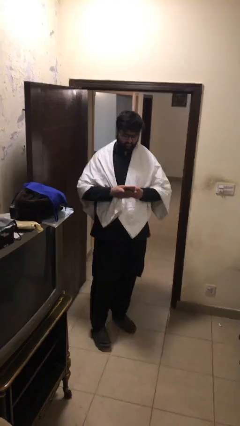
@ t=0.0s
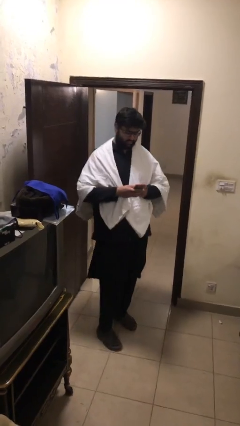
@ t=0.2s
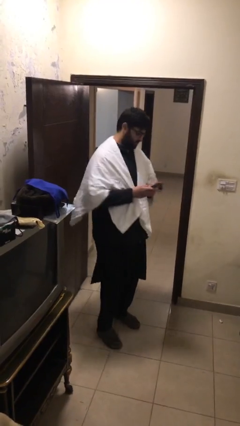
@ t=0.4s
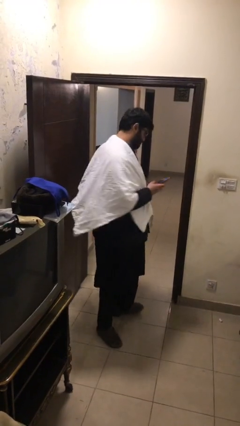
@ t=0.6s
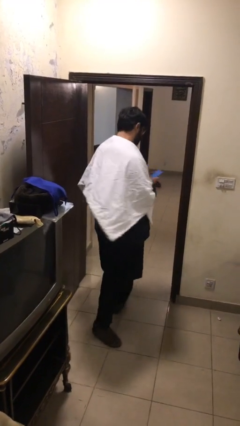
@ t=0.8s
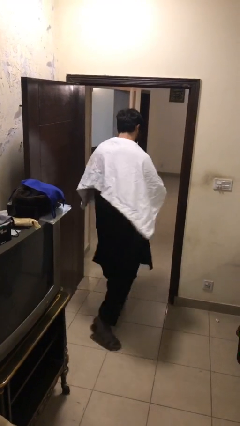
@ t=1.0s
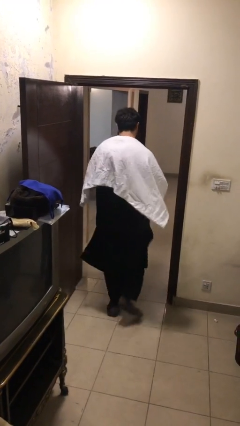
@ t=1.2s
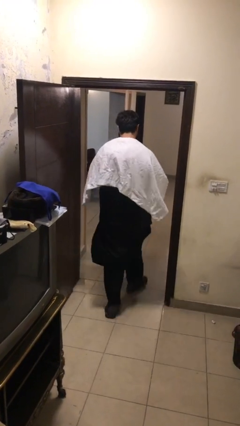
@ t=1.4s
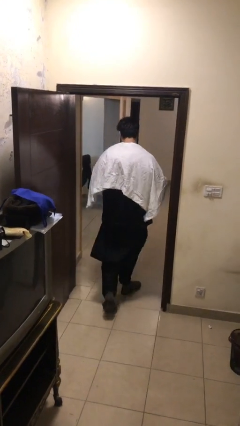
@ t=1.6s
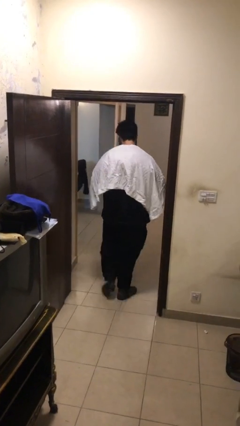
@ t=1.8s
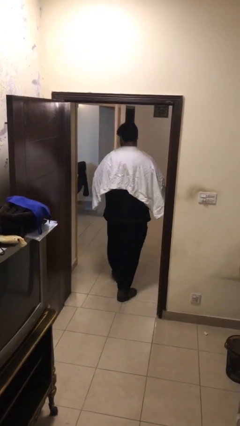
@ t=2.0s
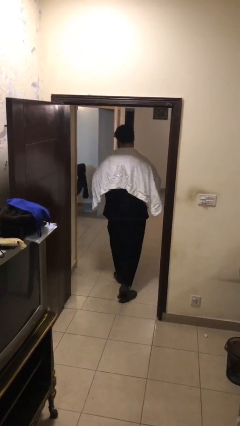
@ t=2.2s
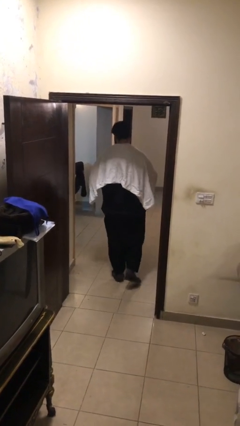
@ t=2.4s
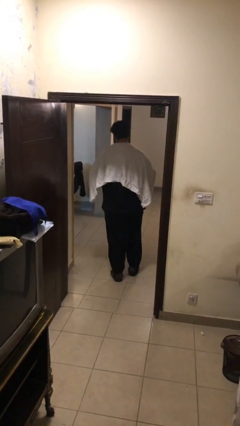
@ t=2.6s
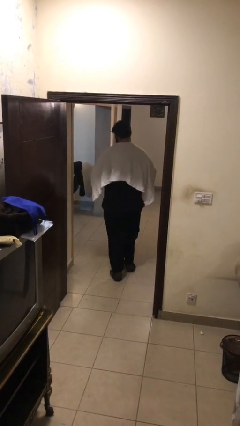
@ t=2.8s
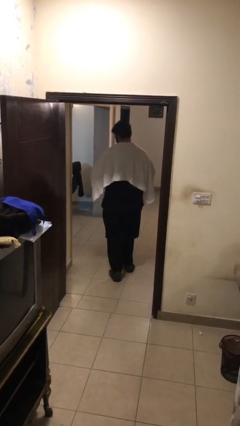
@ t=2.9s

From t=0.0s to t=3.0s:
person exits scene through structure

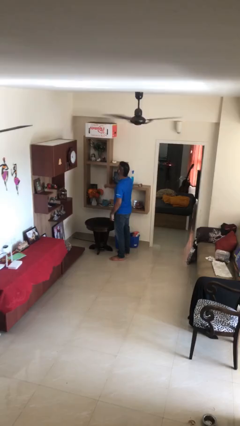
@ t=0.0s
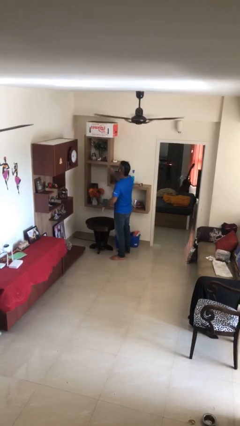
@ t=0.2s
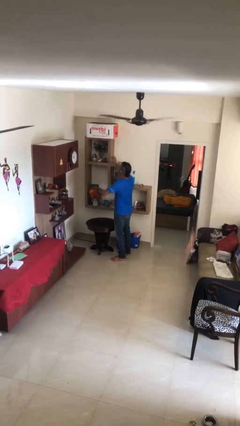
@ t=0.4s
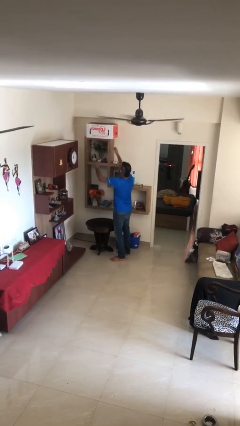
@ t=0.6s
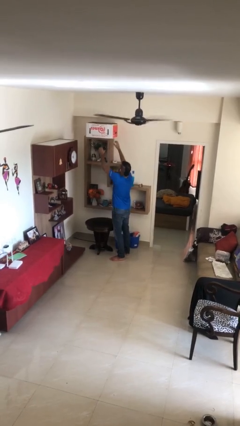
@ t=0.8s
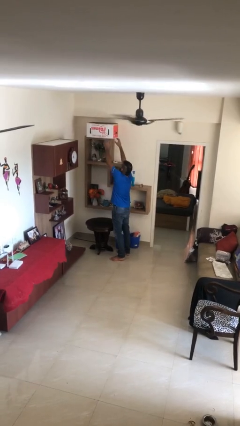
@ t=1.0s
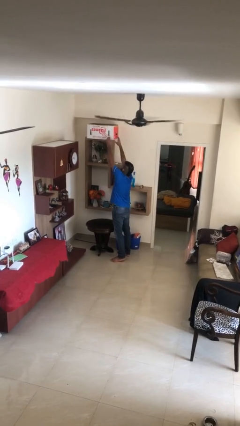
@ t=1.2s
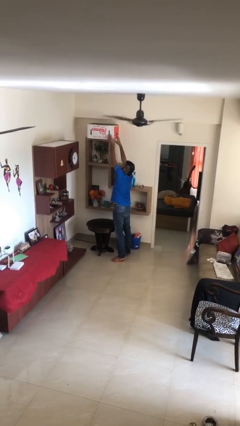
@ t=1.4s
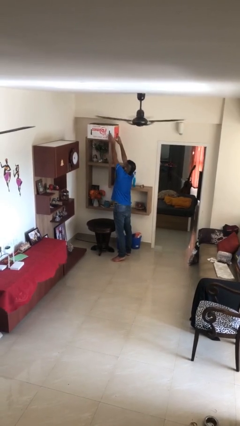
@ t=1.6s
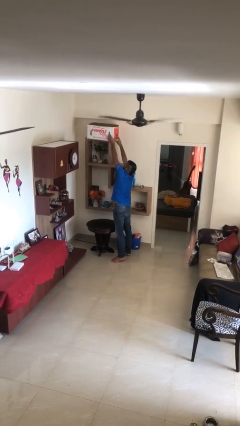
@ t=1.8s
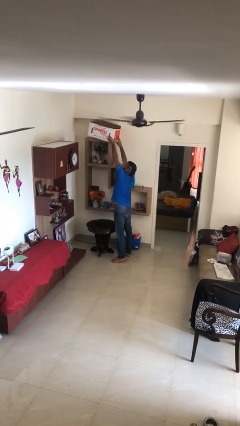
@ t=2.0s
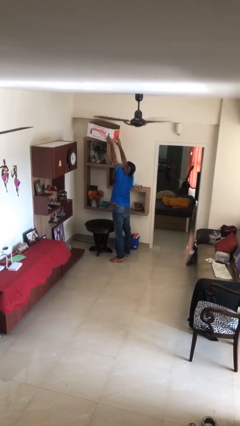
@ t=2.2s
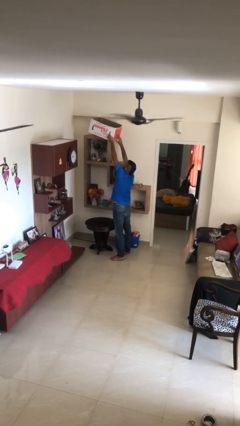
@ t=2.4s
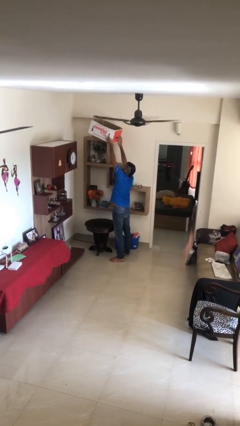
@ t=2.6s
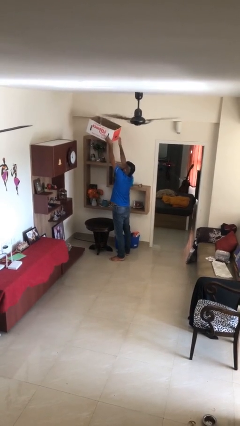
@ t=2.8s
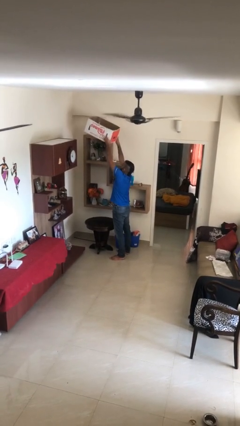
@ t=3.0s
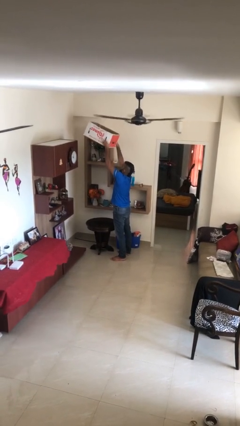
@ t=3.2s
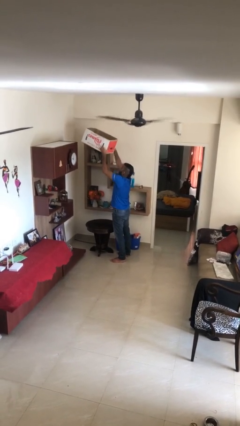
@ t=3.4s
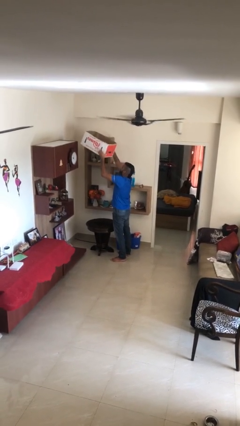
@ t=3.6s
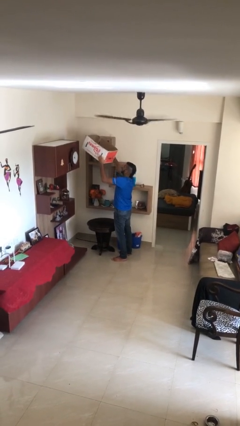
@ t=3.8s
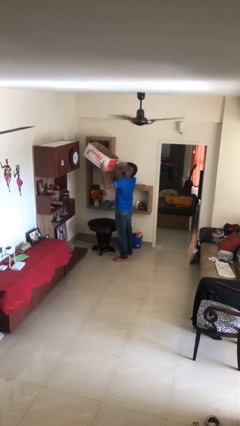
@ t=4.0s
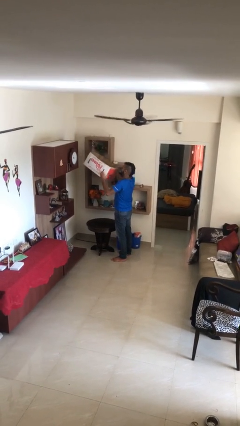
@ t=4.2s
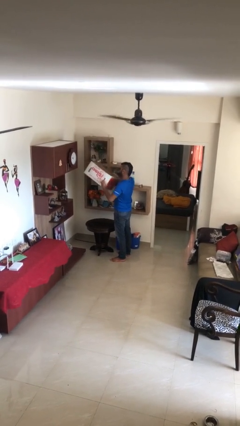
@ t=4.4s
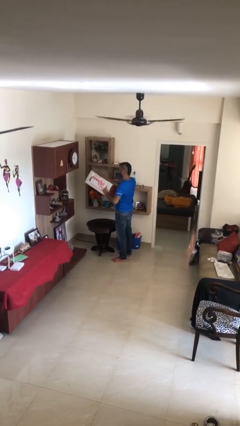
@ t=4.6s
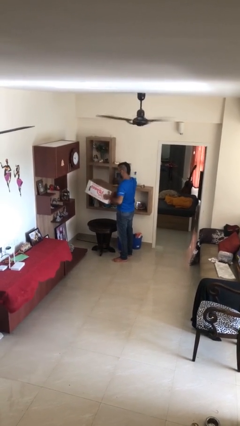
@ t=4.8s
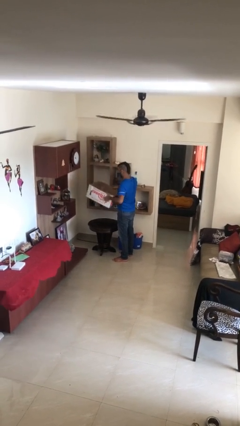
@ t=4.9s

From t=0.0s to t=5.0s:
person picks up object from shelf

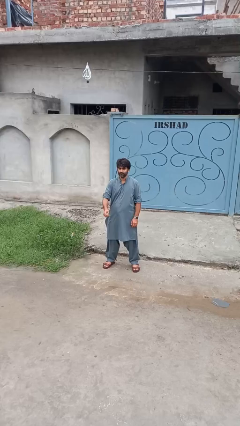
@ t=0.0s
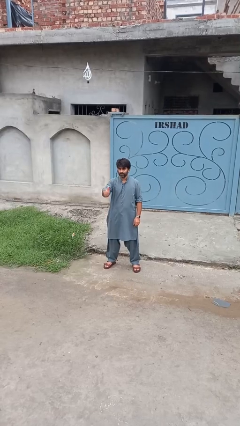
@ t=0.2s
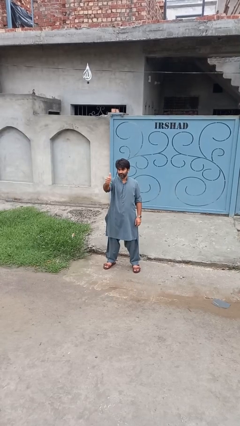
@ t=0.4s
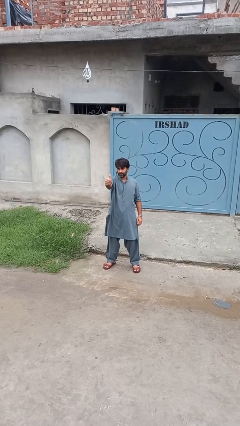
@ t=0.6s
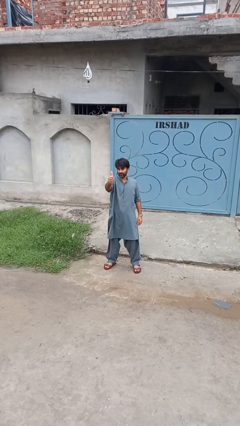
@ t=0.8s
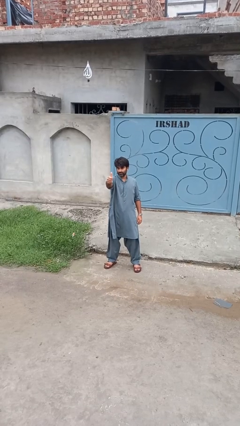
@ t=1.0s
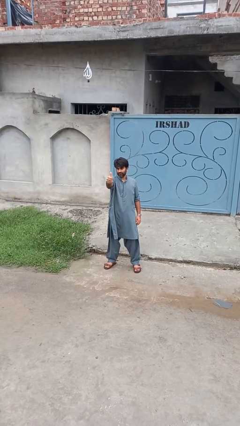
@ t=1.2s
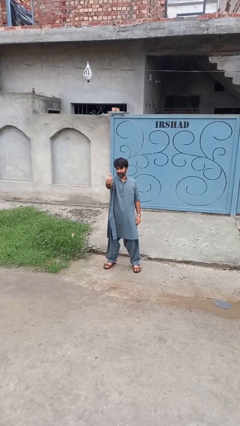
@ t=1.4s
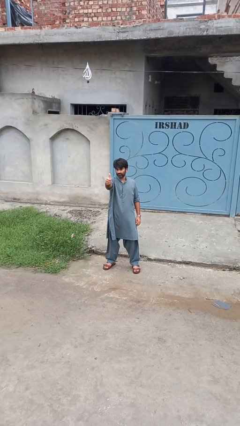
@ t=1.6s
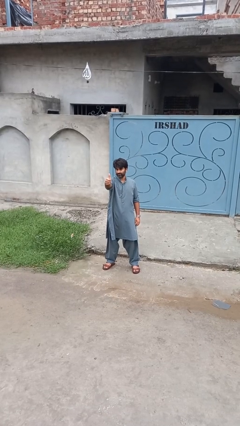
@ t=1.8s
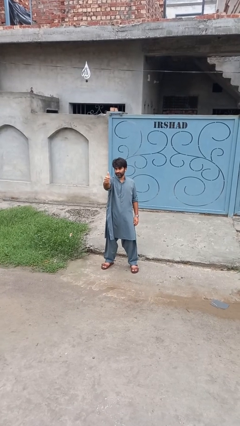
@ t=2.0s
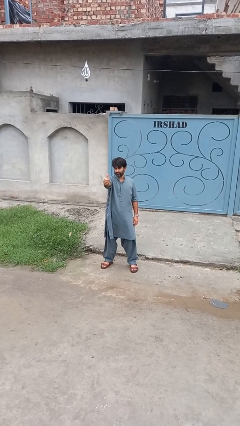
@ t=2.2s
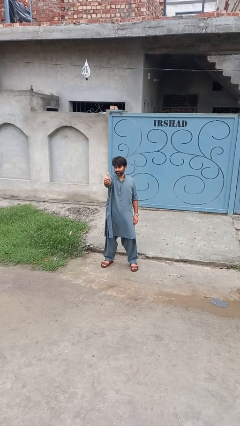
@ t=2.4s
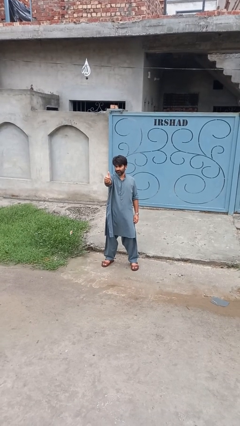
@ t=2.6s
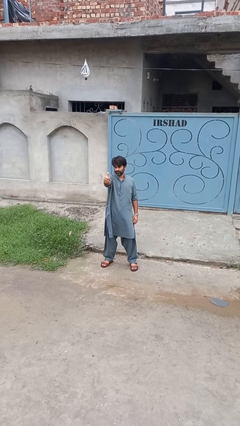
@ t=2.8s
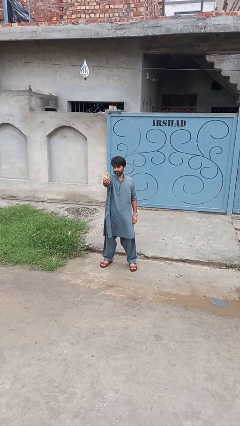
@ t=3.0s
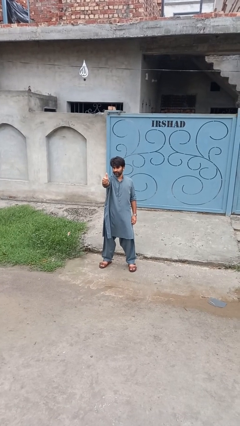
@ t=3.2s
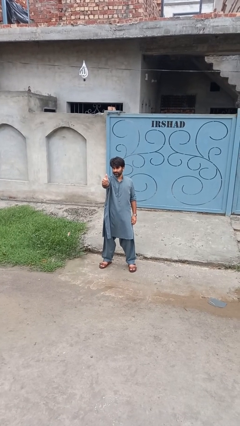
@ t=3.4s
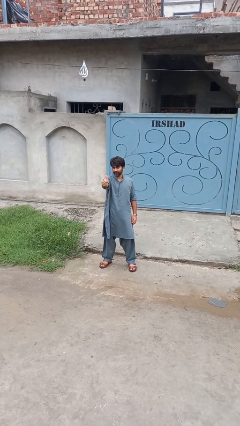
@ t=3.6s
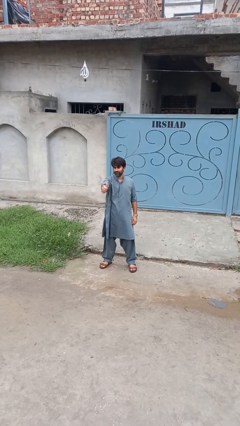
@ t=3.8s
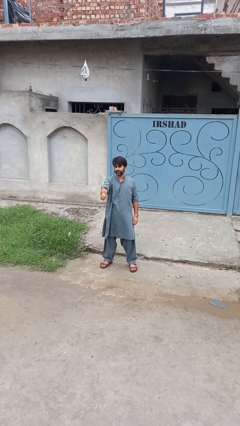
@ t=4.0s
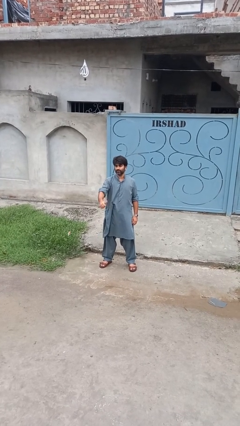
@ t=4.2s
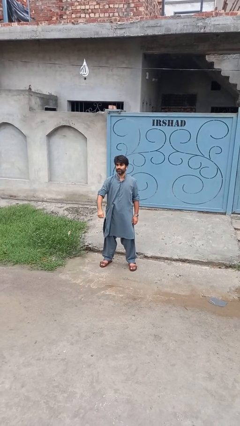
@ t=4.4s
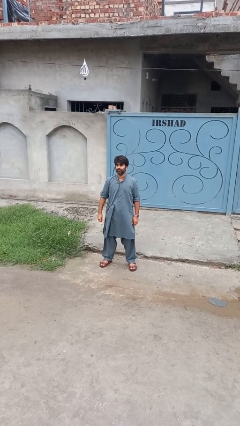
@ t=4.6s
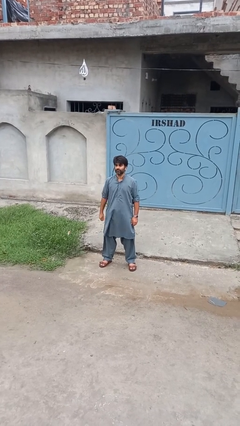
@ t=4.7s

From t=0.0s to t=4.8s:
person gestures thumbs up

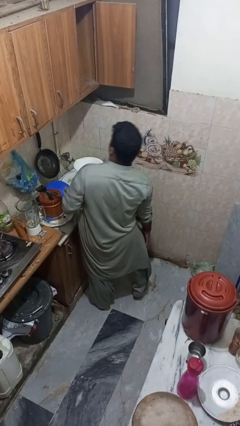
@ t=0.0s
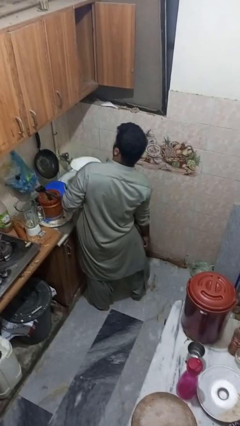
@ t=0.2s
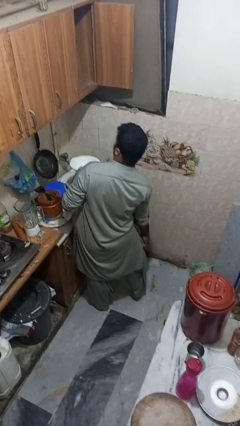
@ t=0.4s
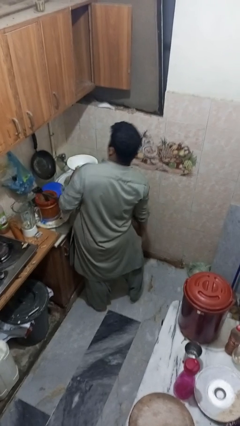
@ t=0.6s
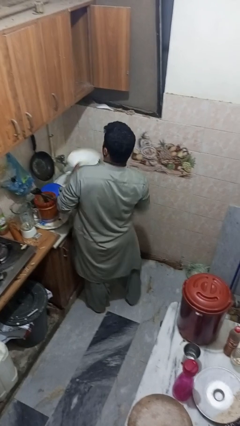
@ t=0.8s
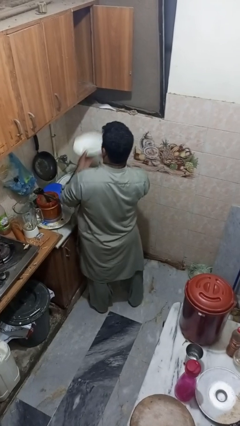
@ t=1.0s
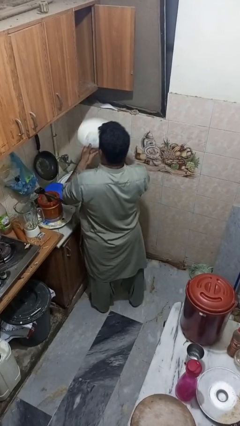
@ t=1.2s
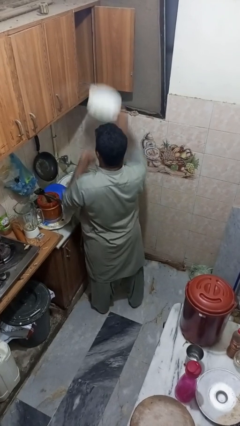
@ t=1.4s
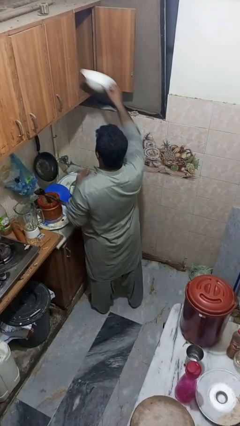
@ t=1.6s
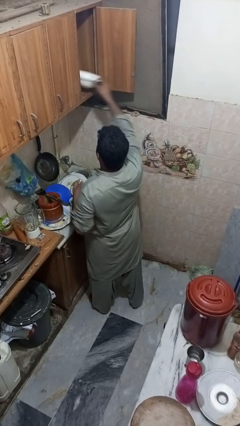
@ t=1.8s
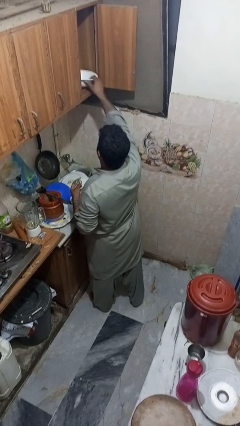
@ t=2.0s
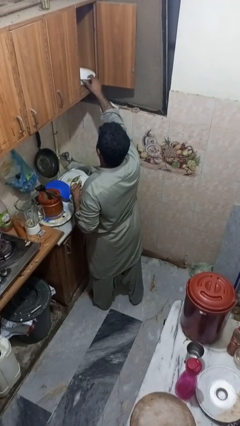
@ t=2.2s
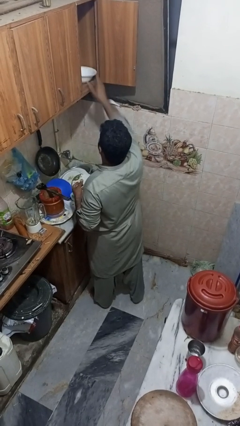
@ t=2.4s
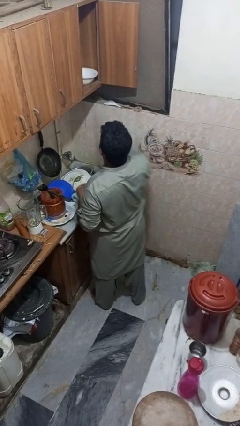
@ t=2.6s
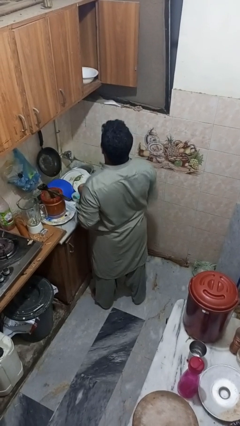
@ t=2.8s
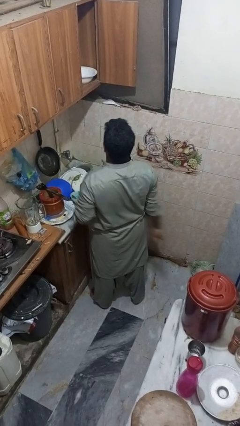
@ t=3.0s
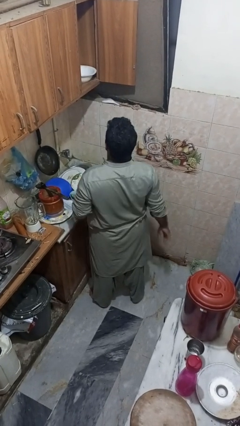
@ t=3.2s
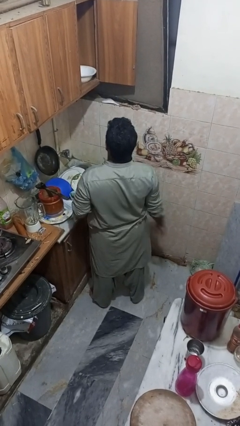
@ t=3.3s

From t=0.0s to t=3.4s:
person puts object in cabinet

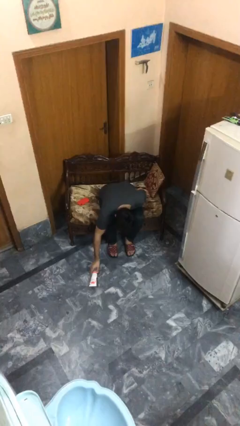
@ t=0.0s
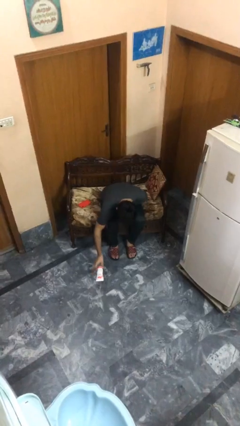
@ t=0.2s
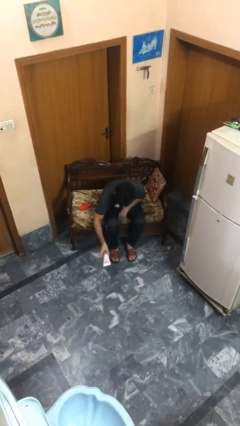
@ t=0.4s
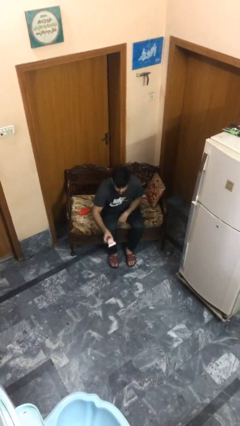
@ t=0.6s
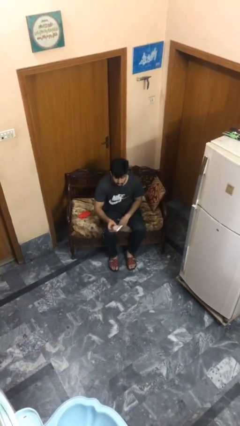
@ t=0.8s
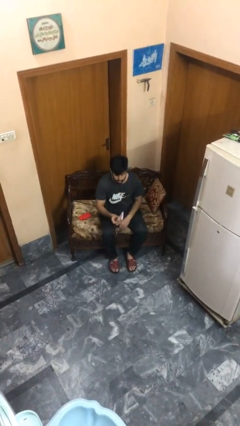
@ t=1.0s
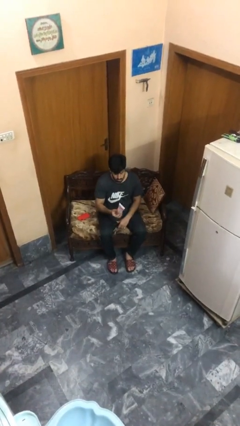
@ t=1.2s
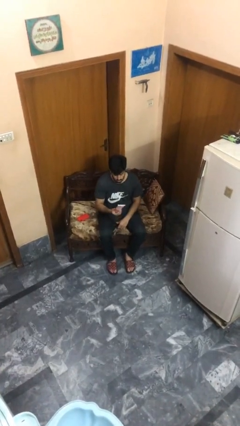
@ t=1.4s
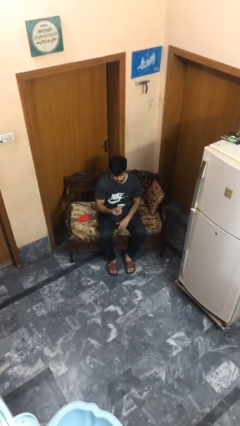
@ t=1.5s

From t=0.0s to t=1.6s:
person picks up object from floor
